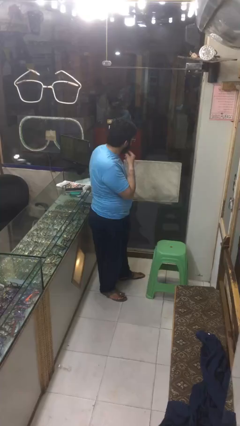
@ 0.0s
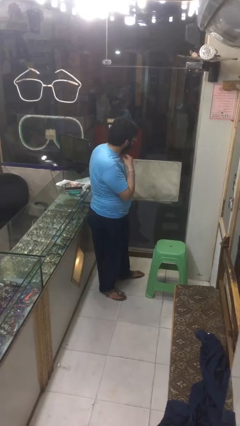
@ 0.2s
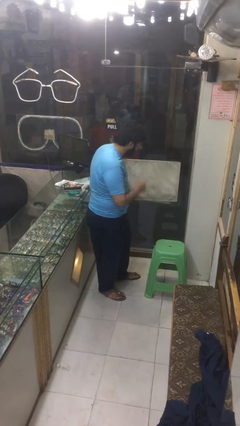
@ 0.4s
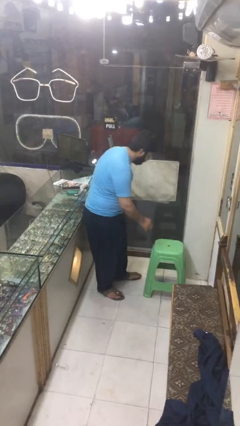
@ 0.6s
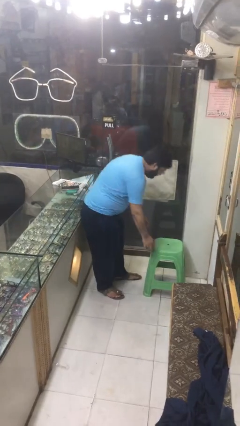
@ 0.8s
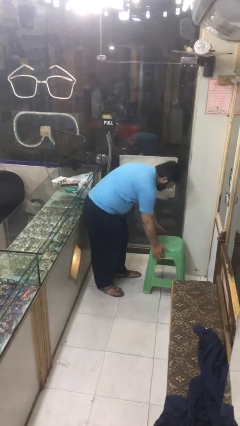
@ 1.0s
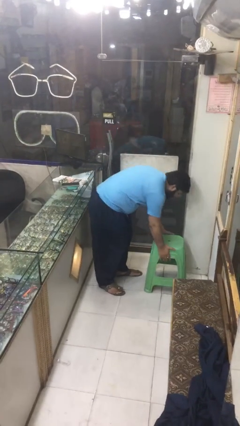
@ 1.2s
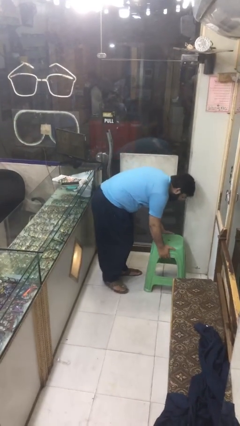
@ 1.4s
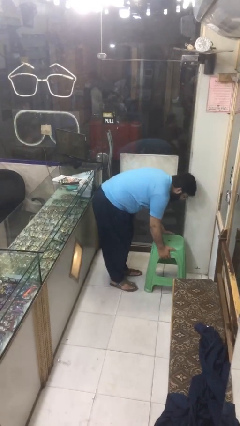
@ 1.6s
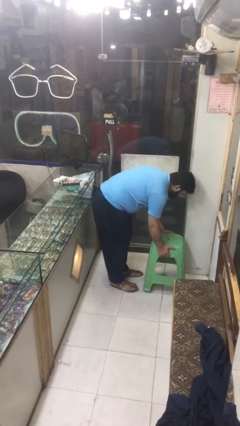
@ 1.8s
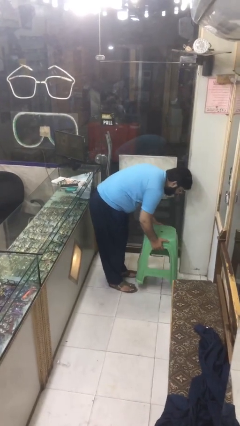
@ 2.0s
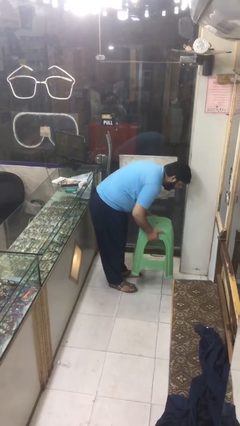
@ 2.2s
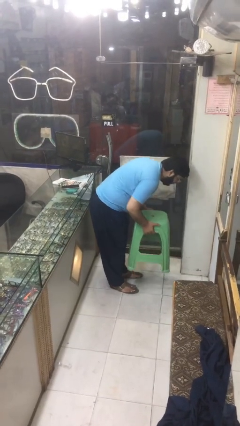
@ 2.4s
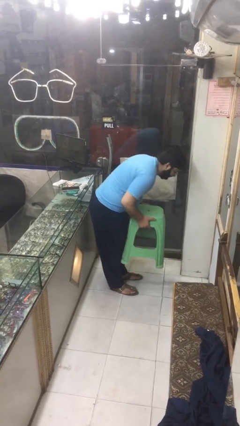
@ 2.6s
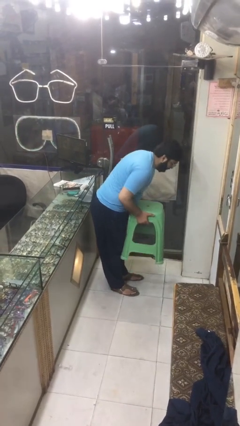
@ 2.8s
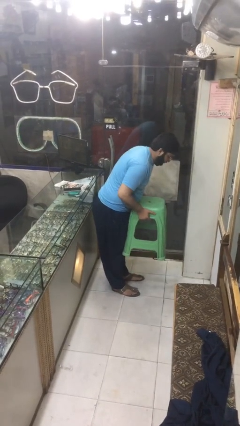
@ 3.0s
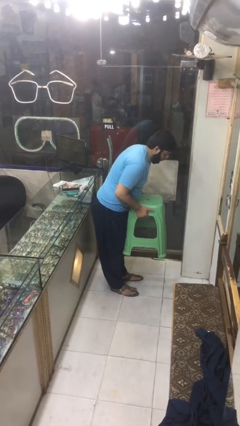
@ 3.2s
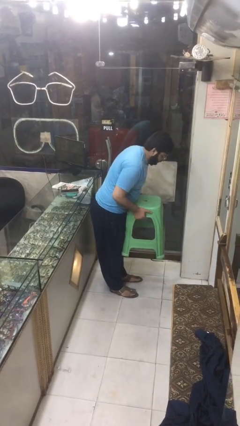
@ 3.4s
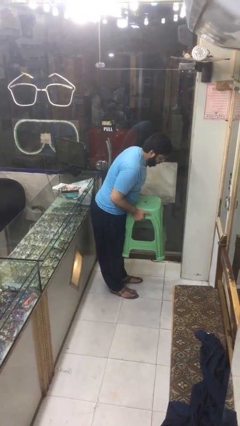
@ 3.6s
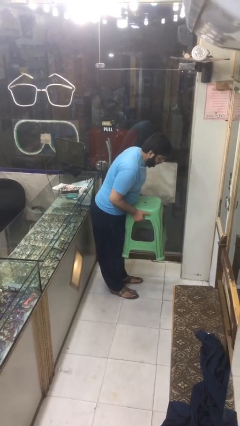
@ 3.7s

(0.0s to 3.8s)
person picks up object from floor

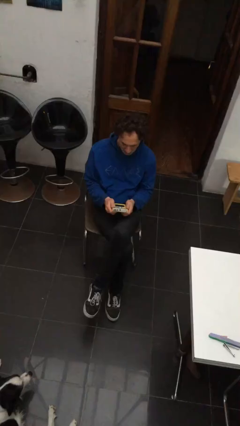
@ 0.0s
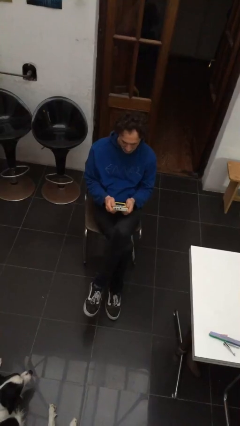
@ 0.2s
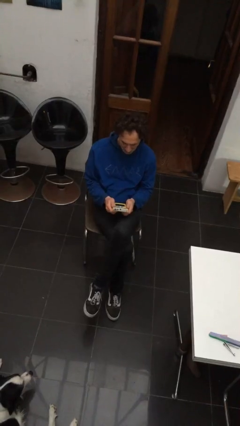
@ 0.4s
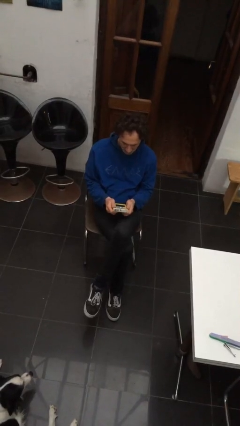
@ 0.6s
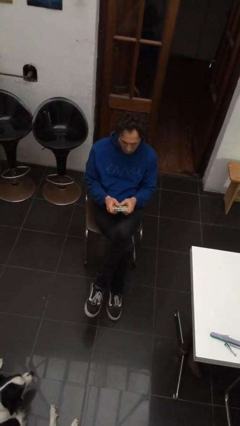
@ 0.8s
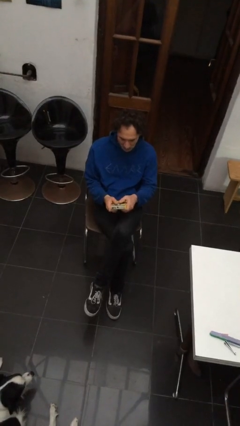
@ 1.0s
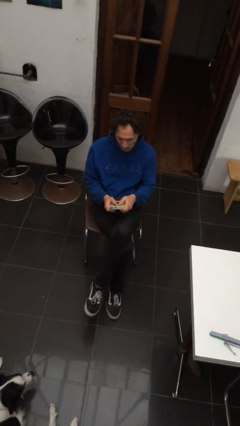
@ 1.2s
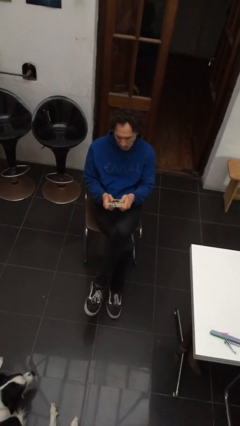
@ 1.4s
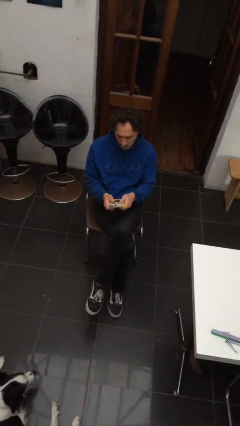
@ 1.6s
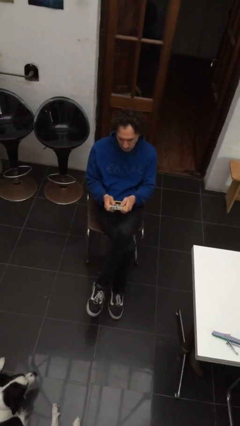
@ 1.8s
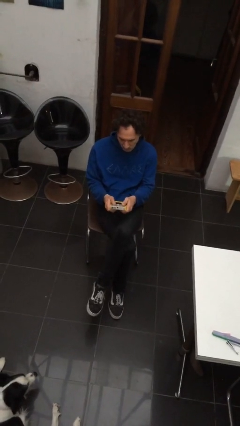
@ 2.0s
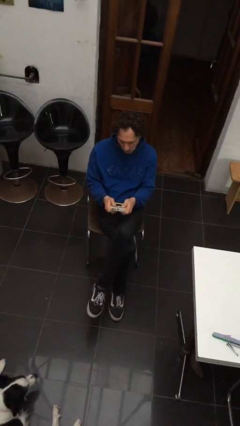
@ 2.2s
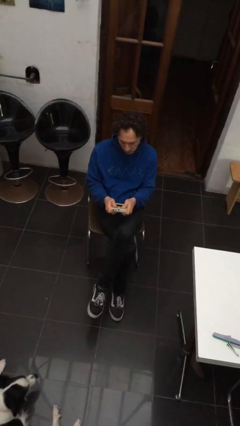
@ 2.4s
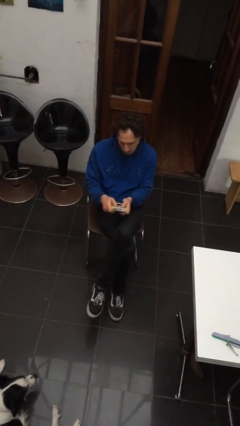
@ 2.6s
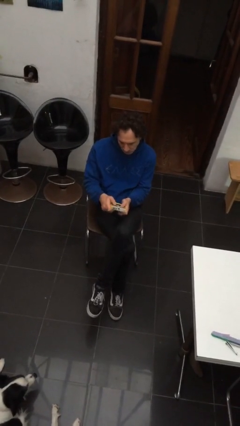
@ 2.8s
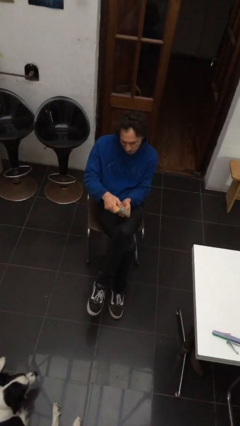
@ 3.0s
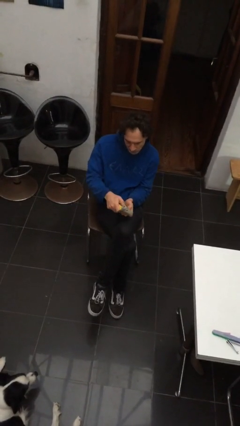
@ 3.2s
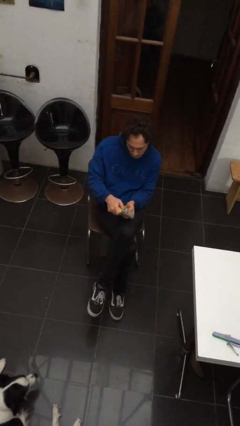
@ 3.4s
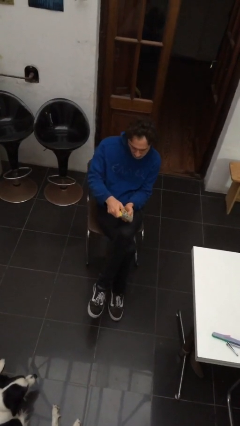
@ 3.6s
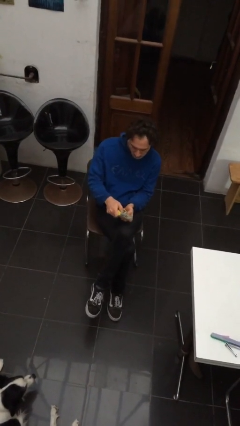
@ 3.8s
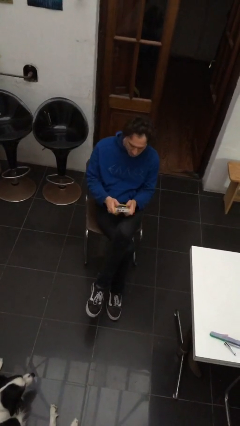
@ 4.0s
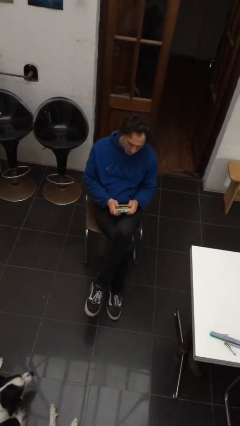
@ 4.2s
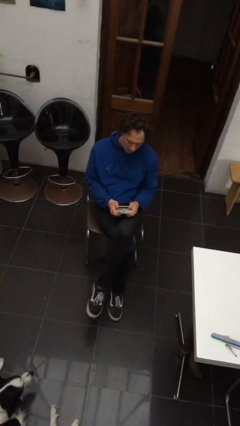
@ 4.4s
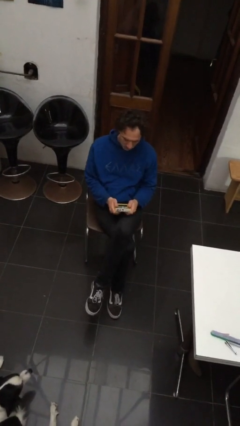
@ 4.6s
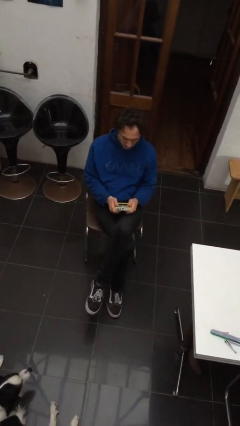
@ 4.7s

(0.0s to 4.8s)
person interacts with handheld game

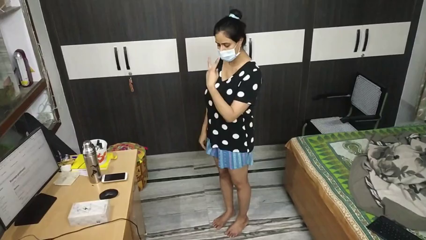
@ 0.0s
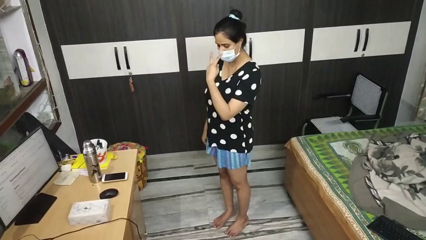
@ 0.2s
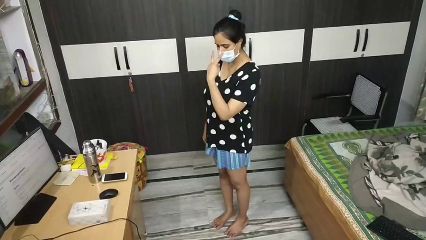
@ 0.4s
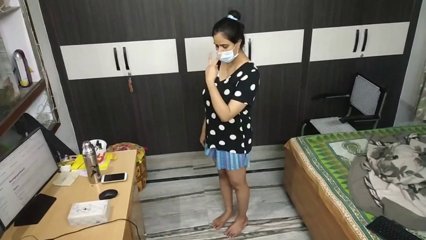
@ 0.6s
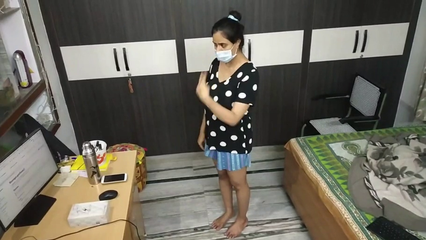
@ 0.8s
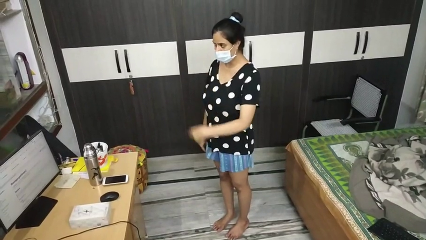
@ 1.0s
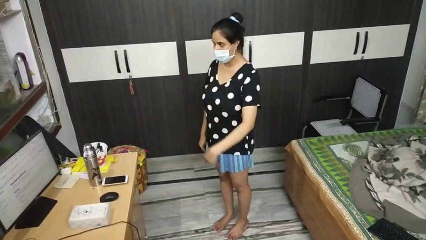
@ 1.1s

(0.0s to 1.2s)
person gestures watch closely

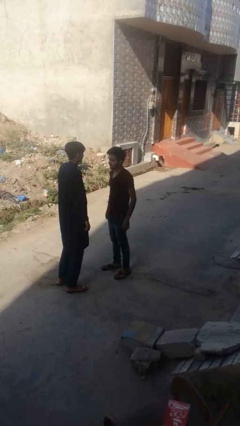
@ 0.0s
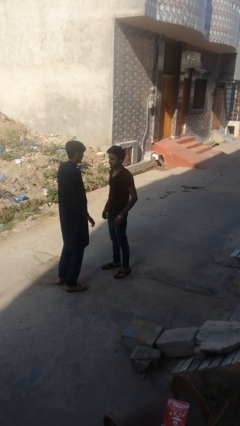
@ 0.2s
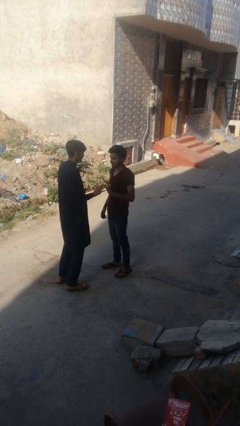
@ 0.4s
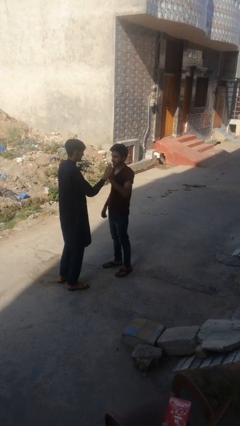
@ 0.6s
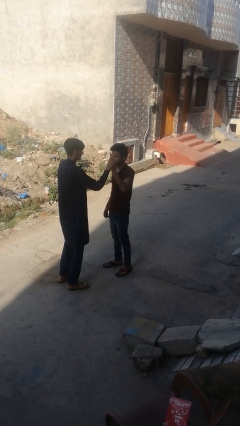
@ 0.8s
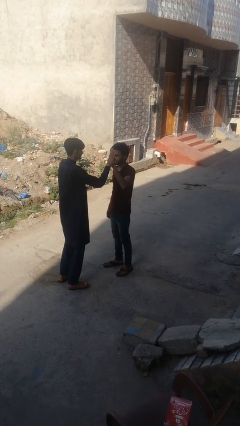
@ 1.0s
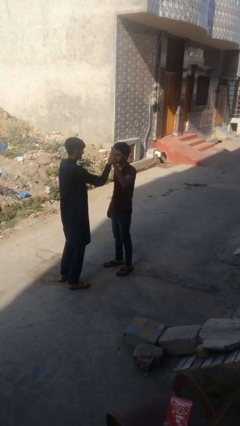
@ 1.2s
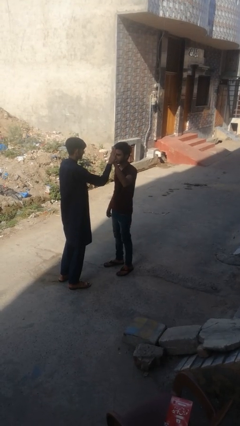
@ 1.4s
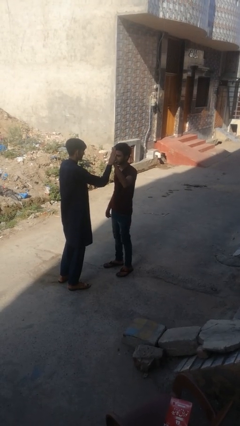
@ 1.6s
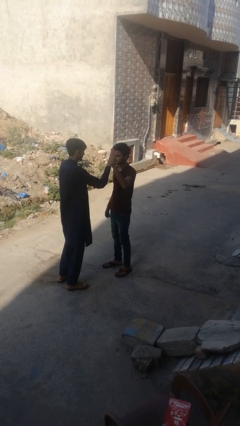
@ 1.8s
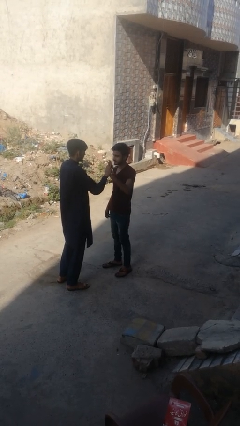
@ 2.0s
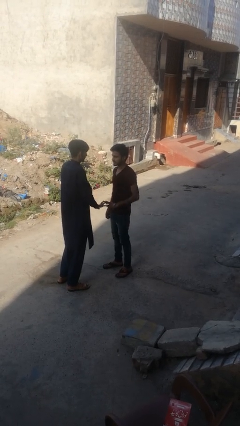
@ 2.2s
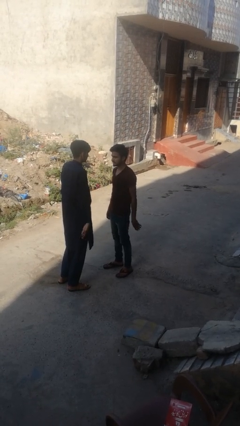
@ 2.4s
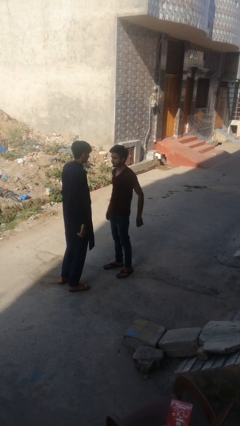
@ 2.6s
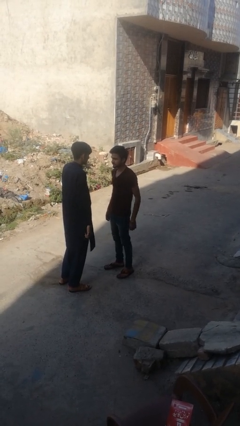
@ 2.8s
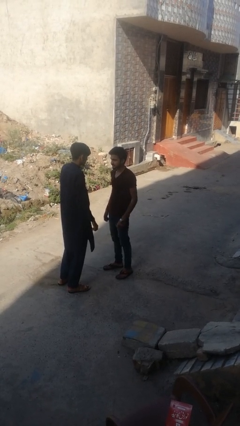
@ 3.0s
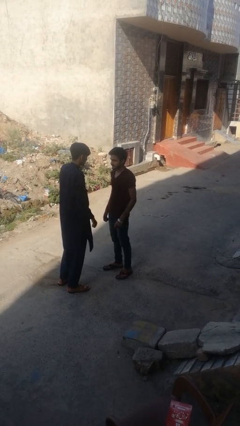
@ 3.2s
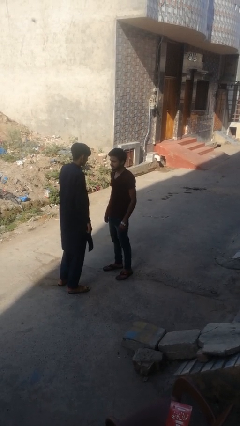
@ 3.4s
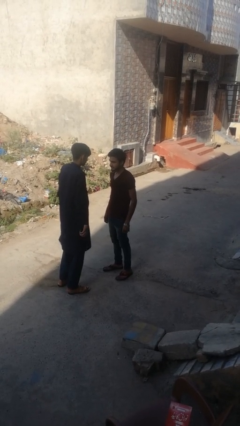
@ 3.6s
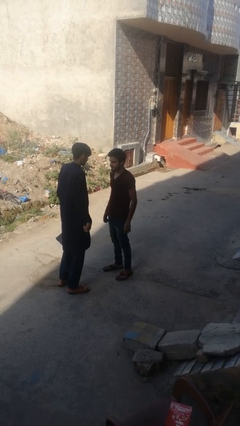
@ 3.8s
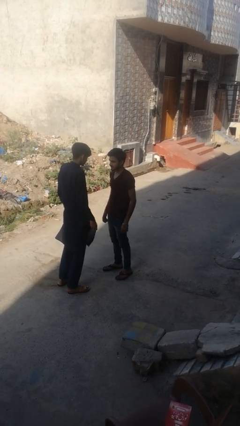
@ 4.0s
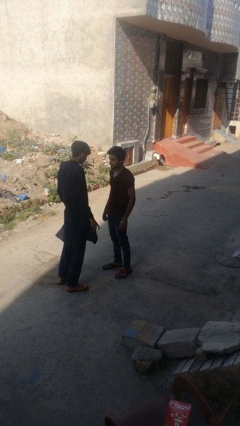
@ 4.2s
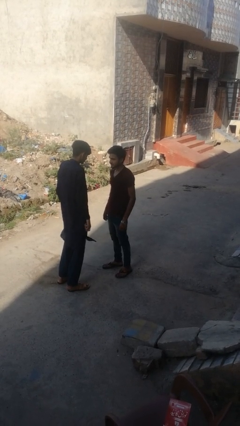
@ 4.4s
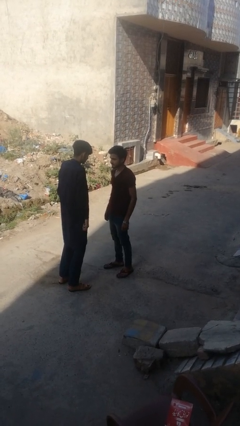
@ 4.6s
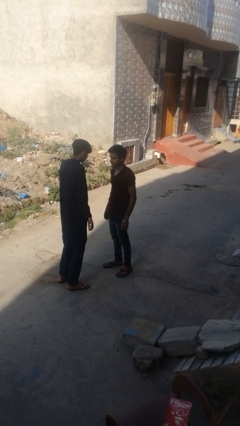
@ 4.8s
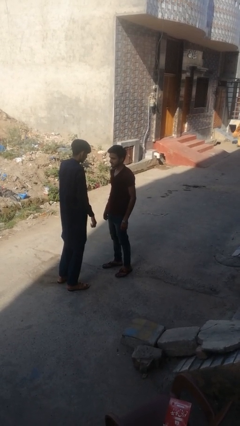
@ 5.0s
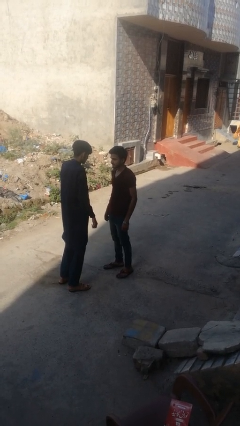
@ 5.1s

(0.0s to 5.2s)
person highfives hand

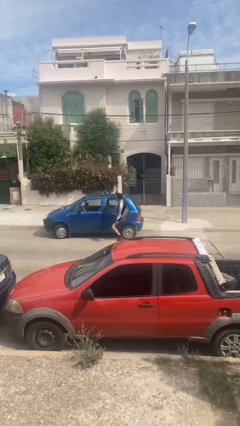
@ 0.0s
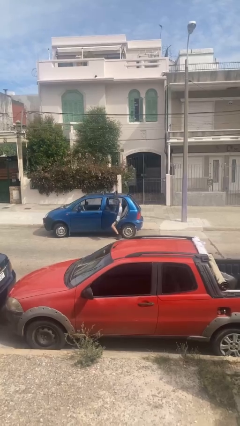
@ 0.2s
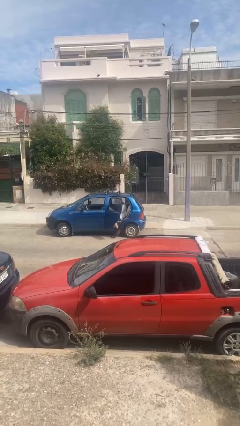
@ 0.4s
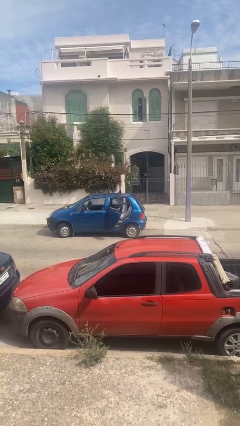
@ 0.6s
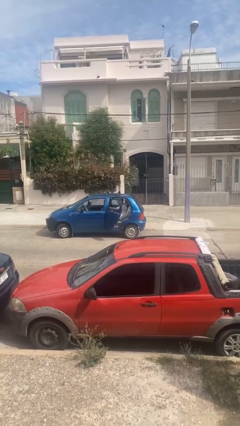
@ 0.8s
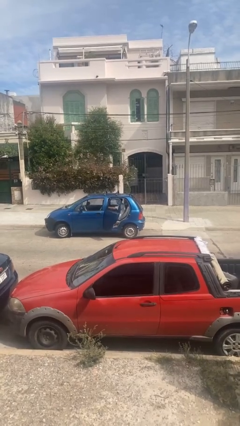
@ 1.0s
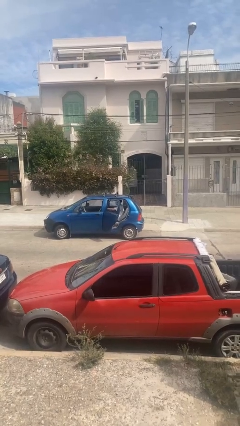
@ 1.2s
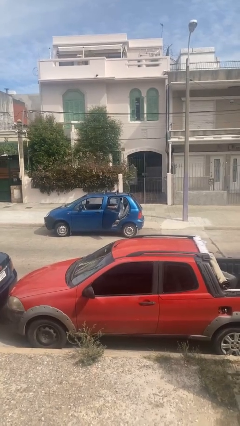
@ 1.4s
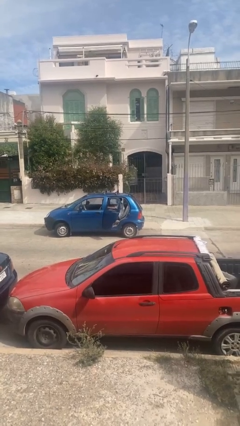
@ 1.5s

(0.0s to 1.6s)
person enters car

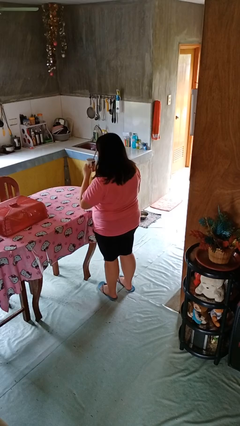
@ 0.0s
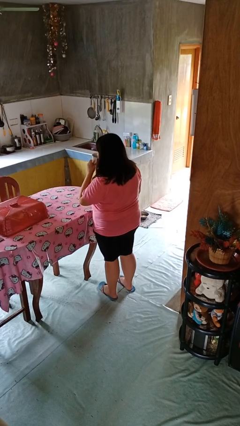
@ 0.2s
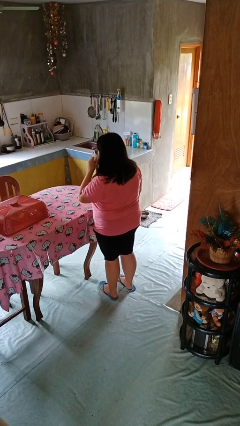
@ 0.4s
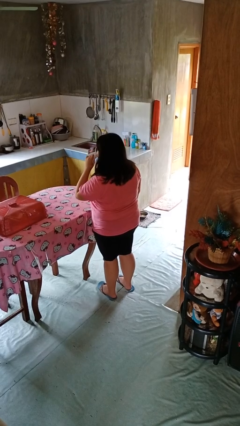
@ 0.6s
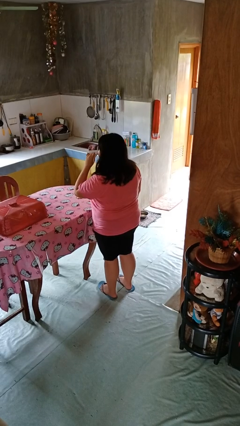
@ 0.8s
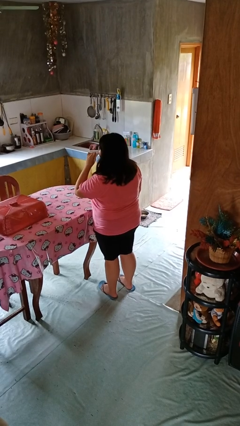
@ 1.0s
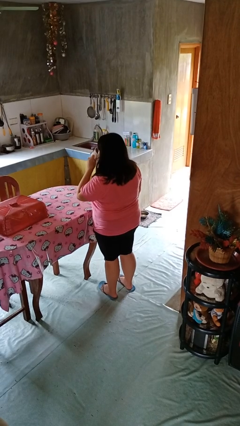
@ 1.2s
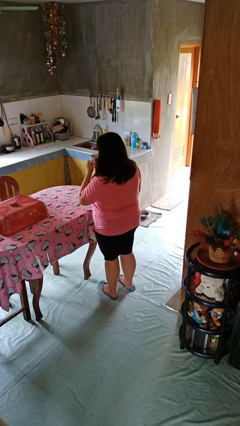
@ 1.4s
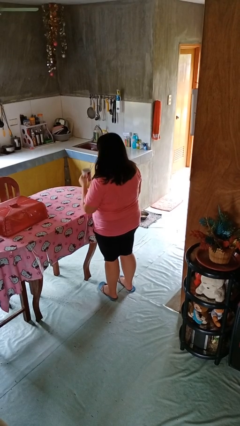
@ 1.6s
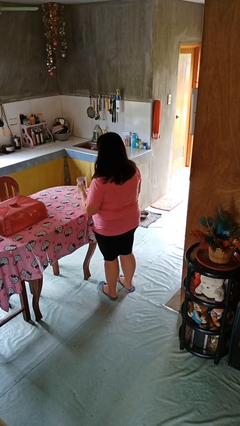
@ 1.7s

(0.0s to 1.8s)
person drinks from mug
